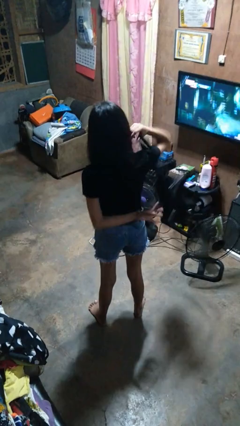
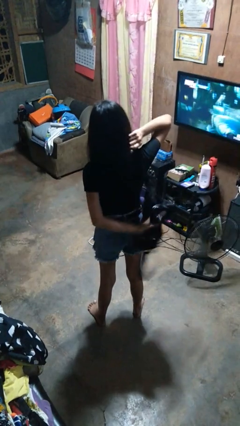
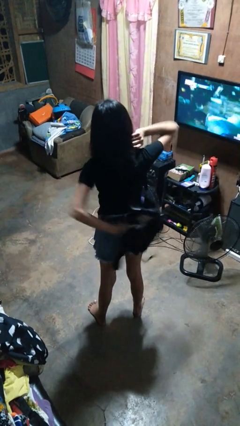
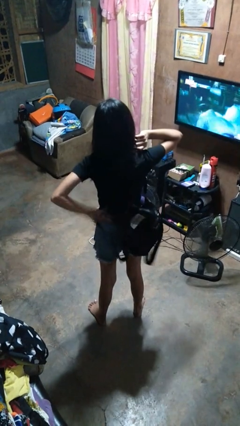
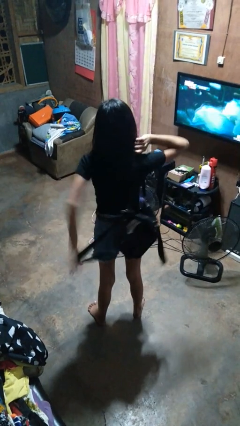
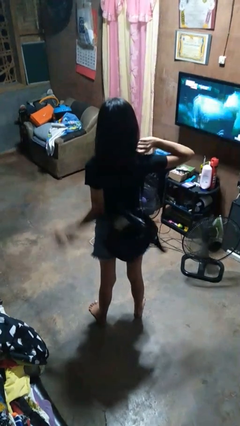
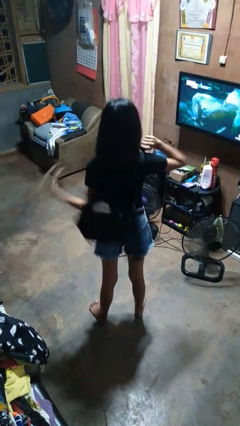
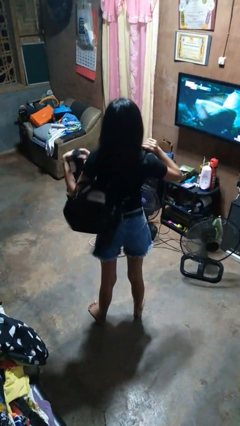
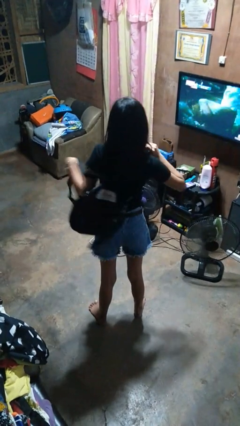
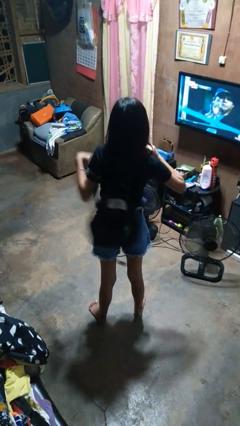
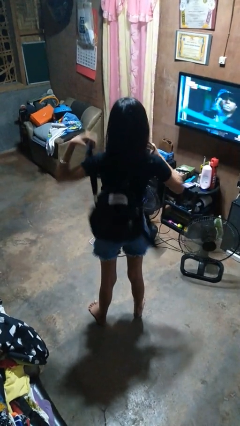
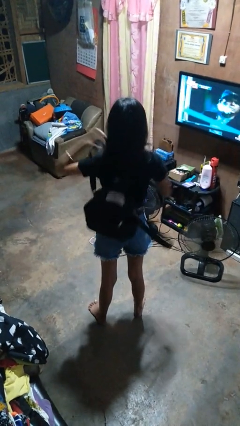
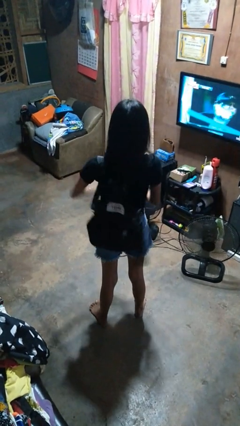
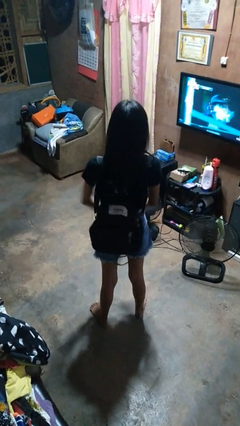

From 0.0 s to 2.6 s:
person puts on backpack

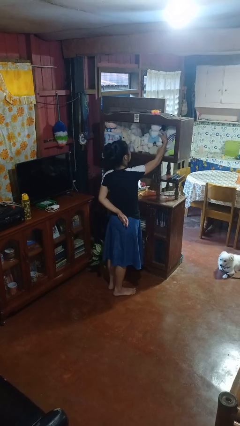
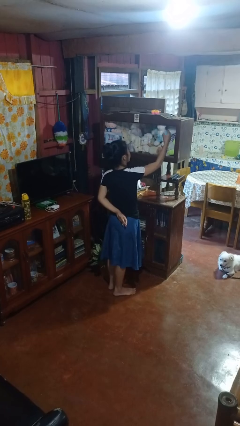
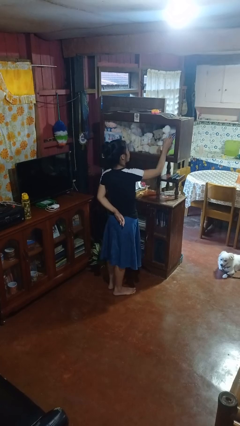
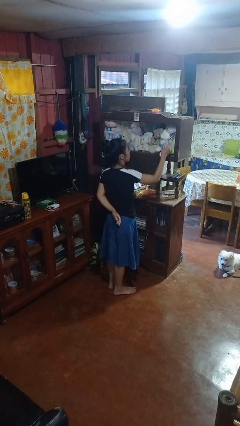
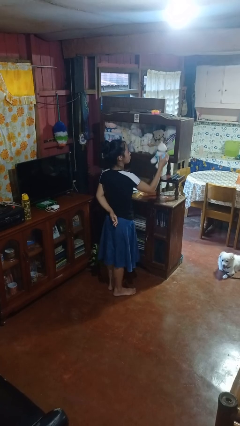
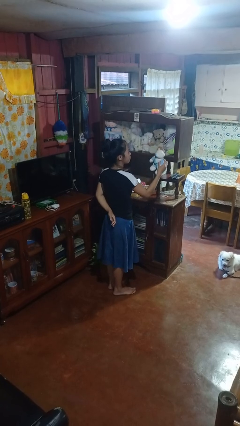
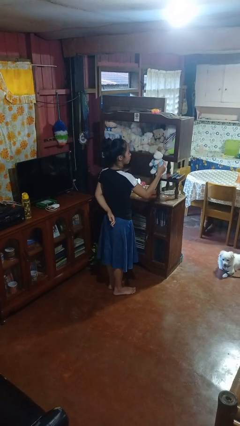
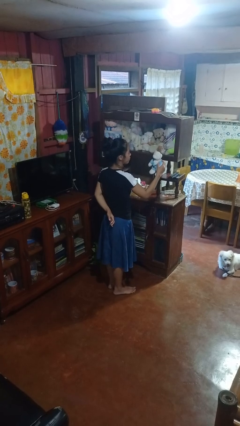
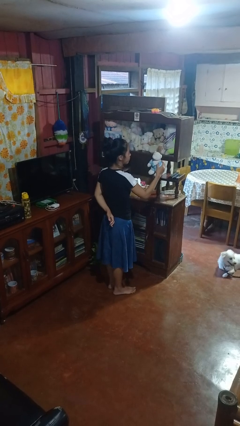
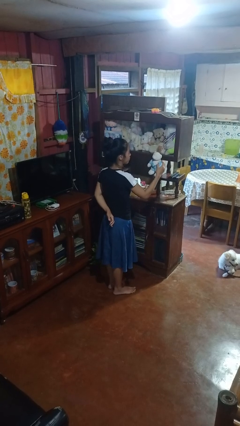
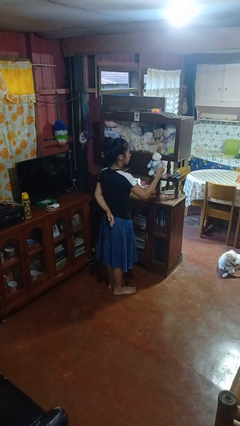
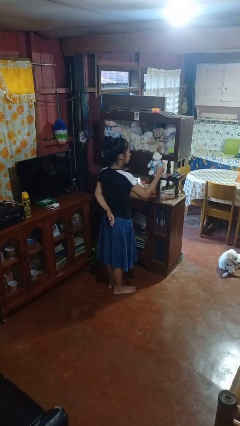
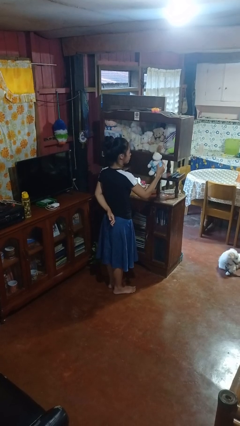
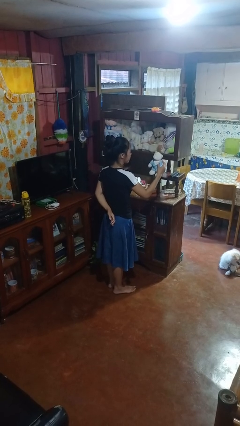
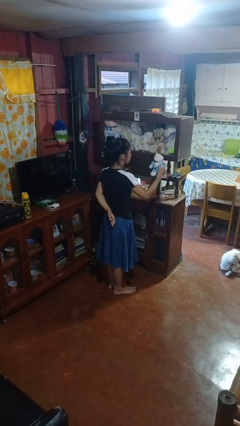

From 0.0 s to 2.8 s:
person picks up object from shelf

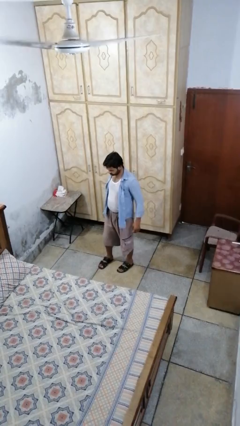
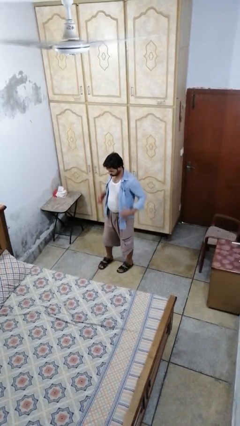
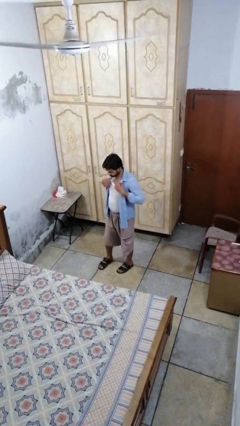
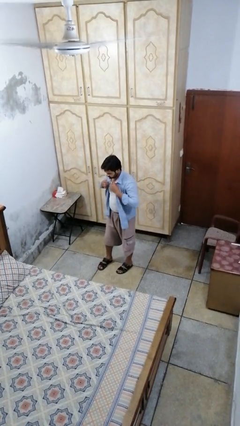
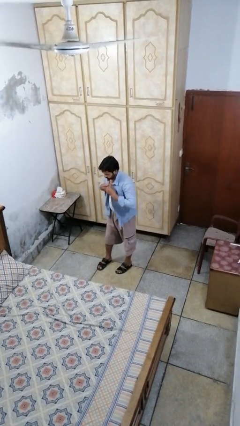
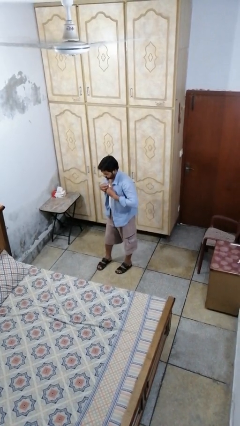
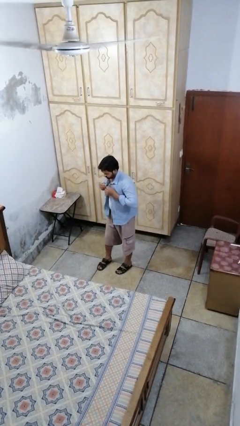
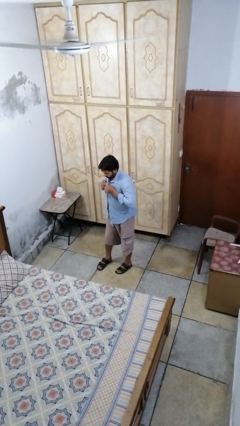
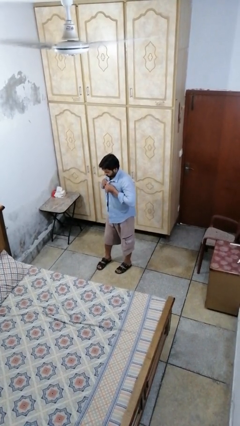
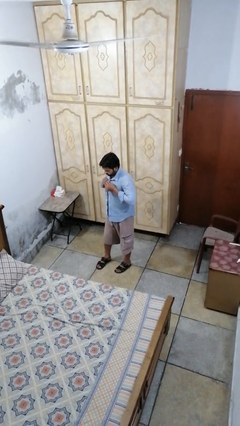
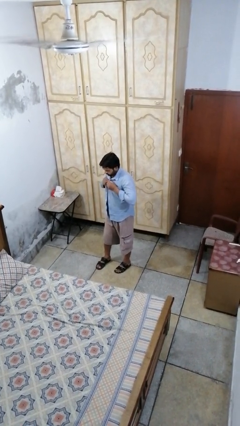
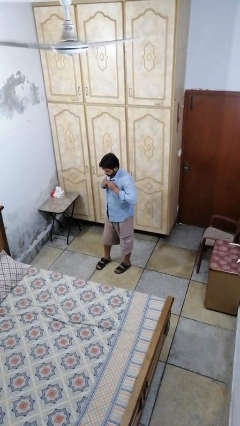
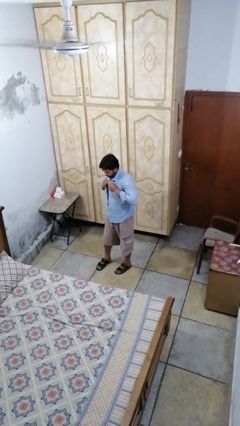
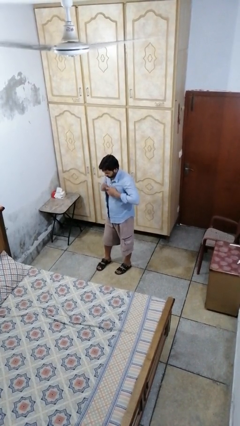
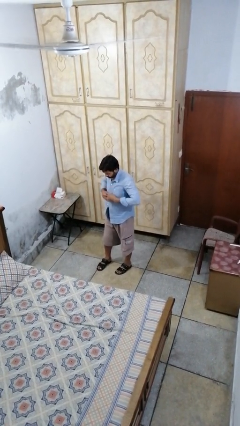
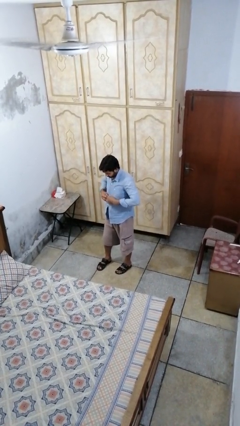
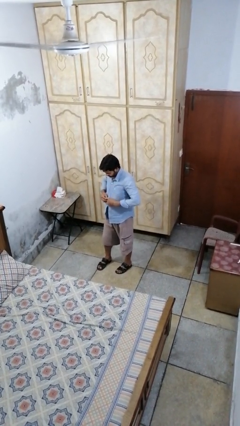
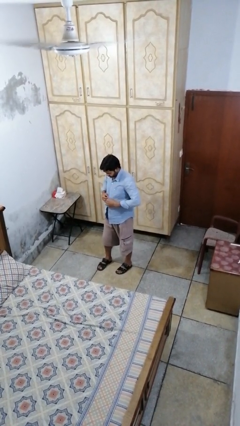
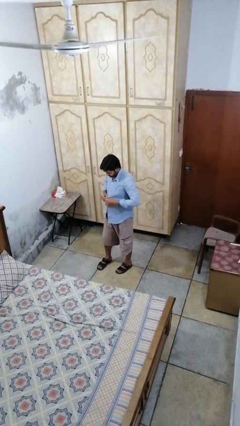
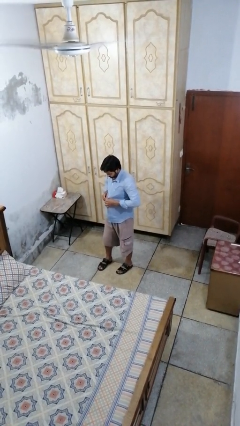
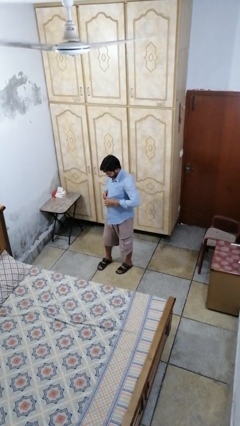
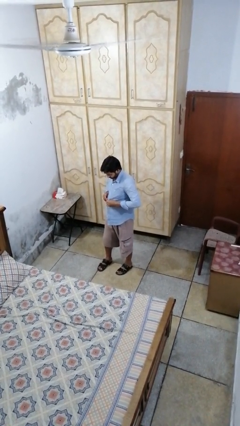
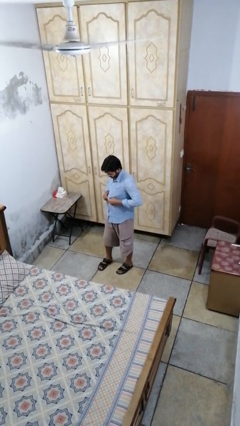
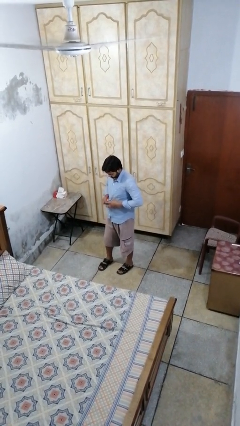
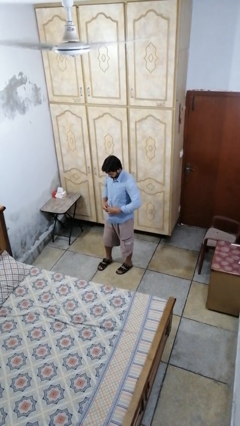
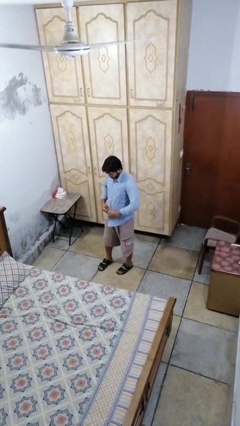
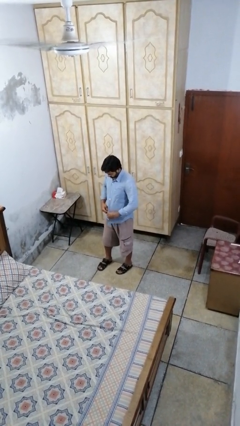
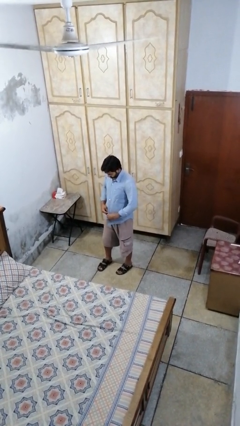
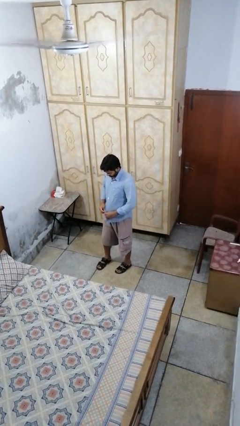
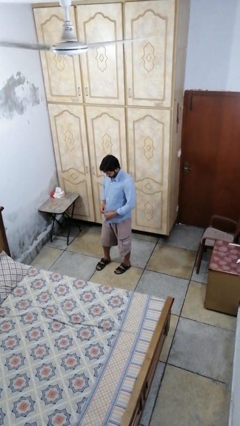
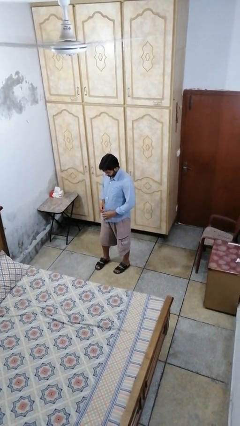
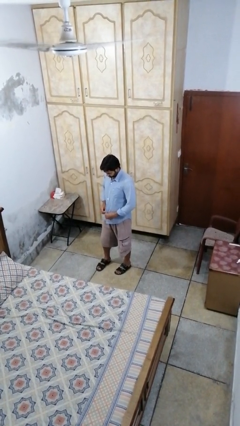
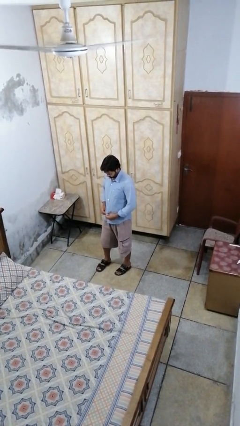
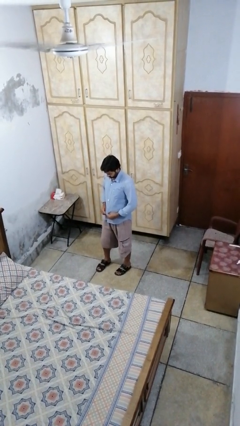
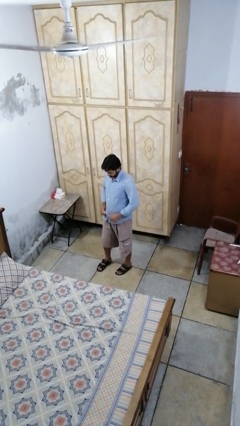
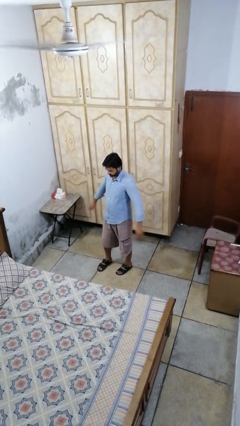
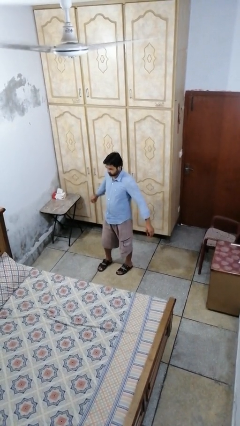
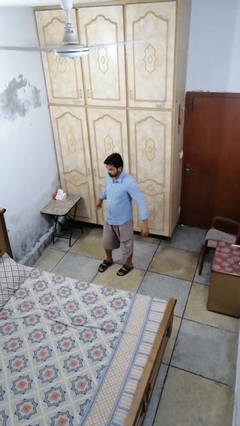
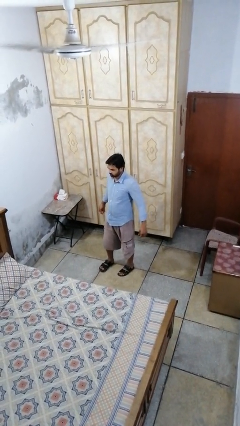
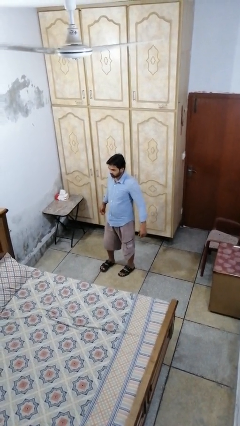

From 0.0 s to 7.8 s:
person buttons shirt

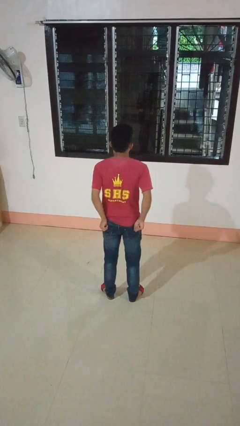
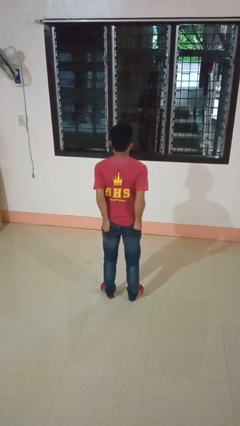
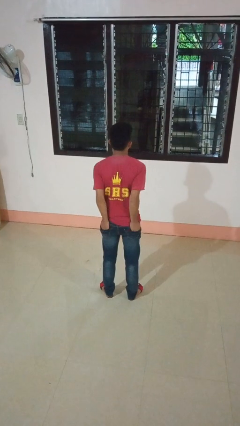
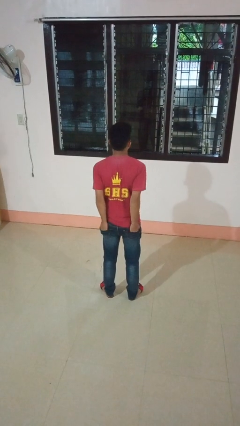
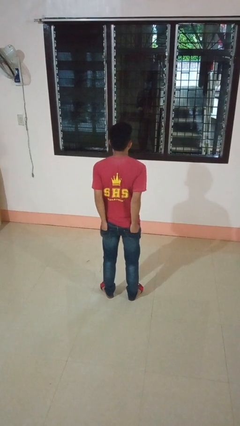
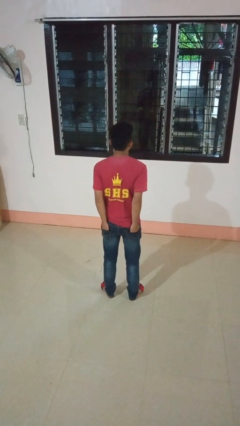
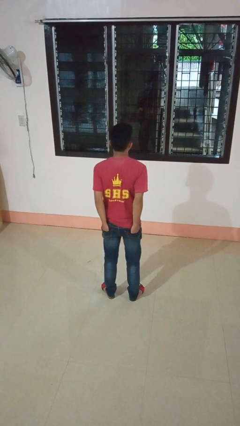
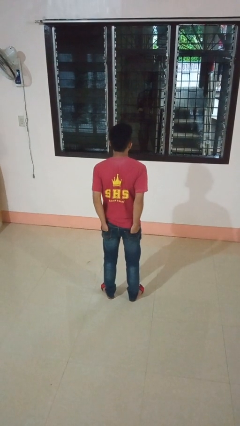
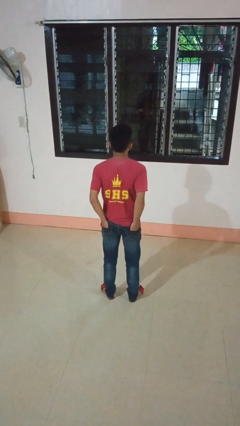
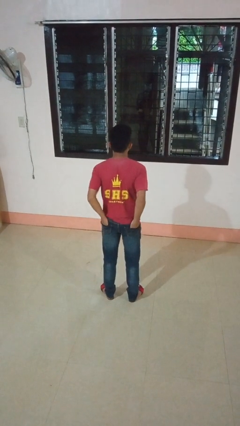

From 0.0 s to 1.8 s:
person puts hands in back pockets

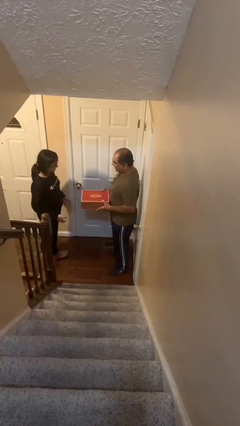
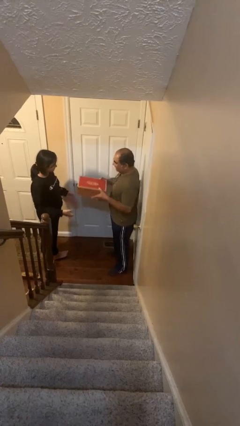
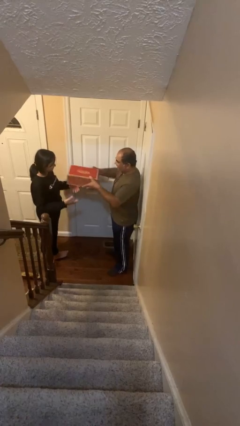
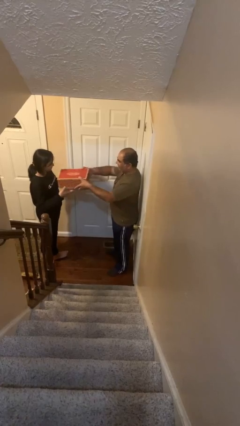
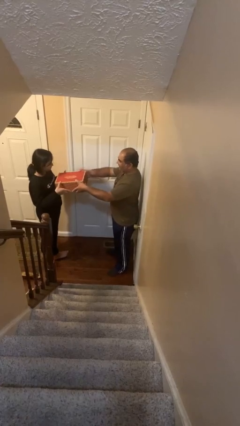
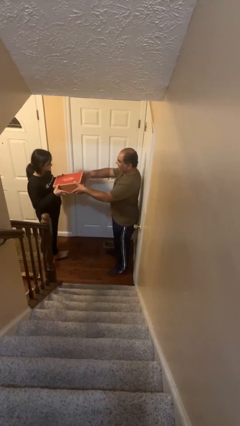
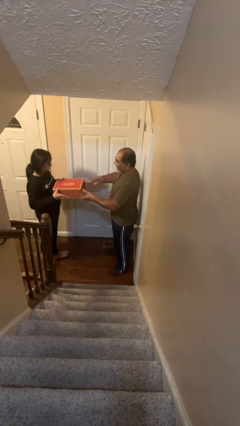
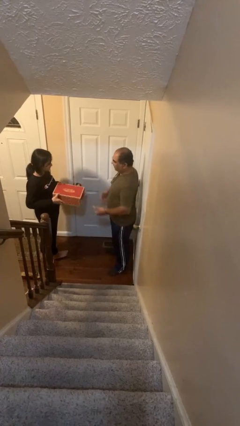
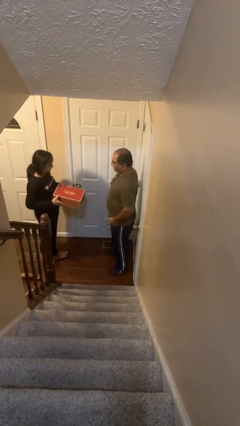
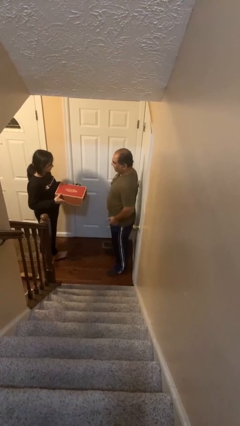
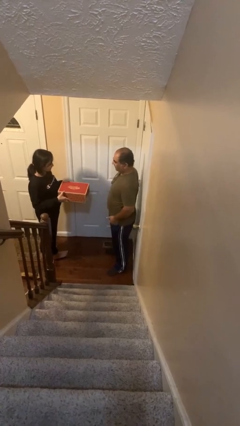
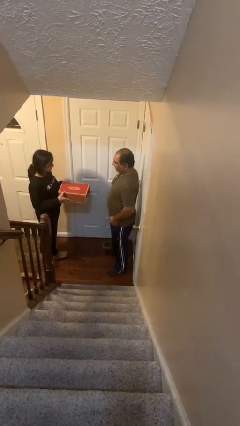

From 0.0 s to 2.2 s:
person transfers object to person
